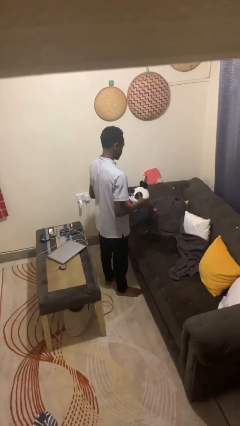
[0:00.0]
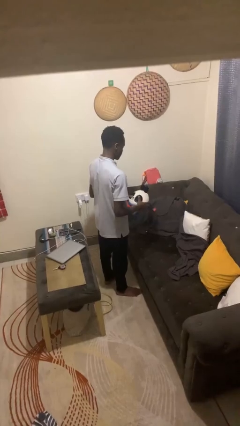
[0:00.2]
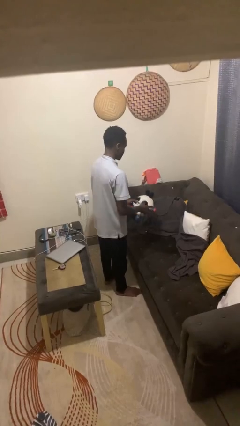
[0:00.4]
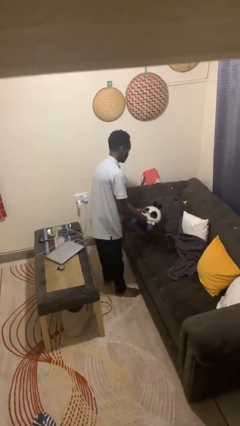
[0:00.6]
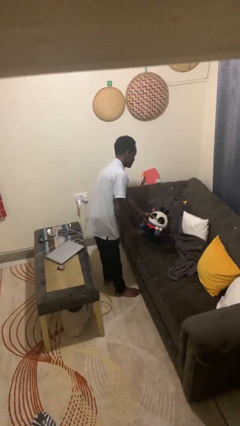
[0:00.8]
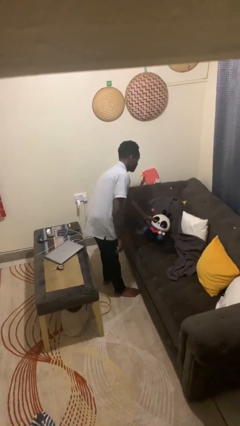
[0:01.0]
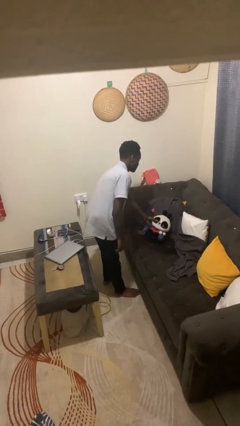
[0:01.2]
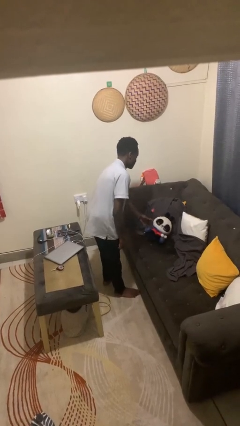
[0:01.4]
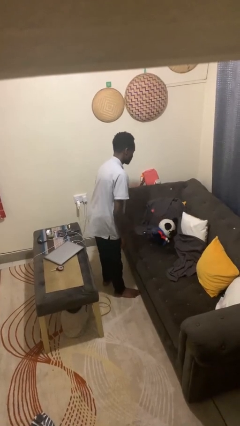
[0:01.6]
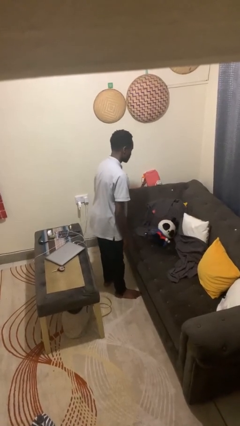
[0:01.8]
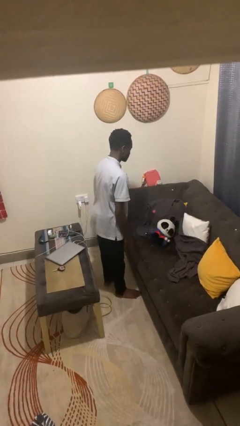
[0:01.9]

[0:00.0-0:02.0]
person puts down object on couch

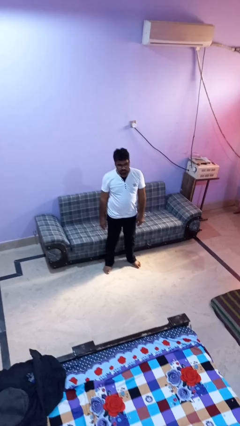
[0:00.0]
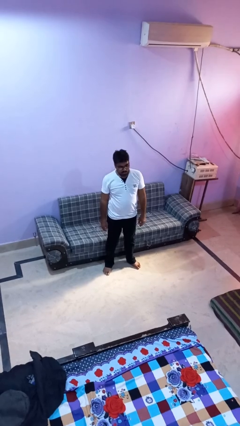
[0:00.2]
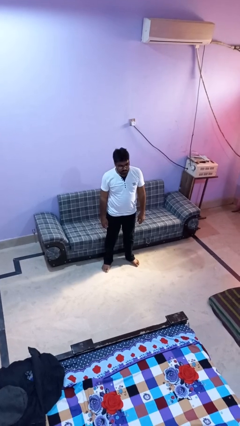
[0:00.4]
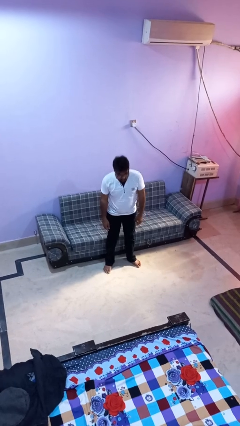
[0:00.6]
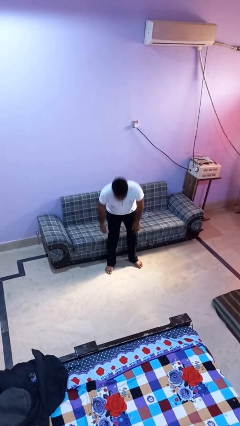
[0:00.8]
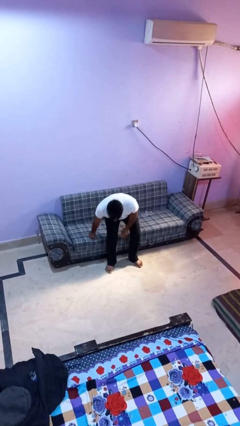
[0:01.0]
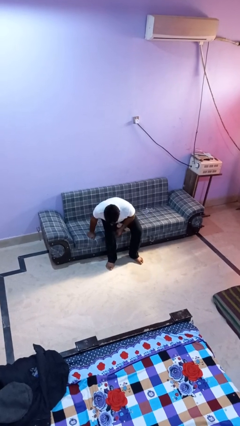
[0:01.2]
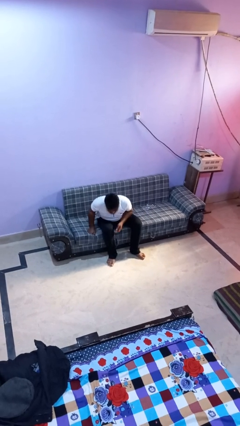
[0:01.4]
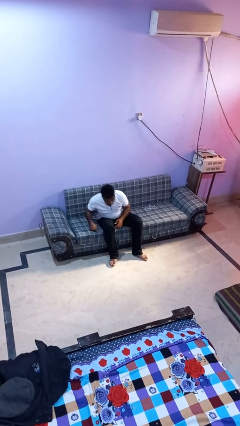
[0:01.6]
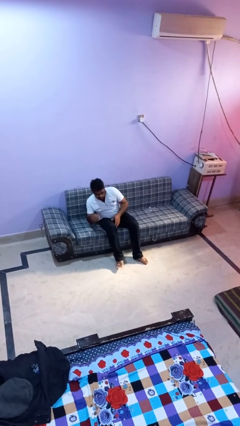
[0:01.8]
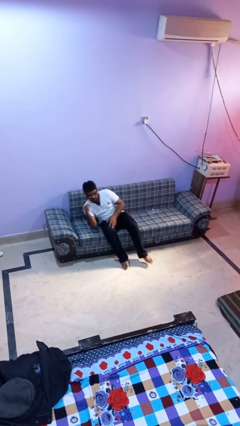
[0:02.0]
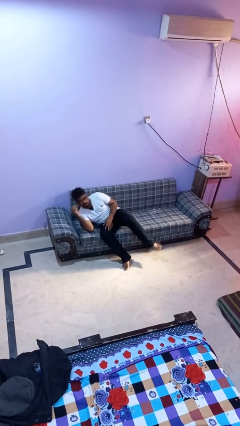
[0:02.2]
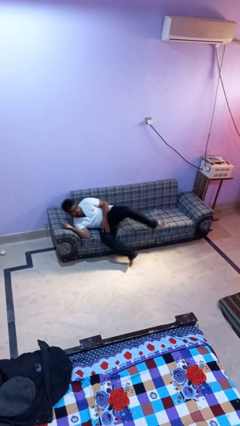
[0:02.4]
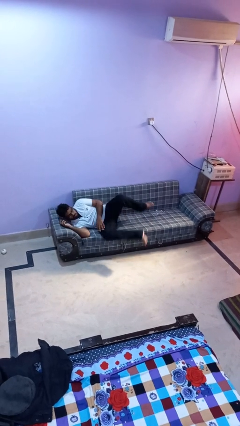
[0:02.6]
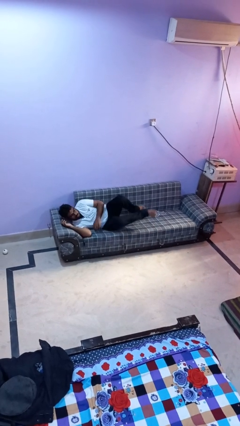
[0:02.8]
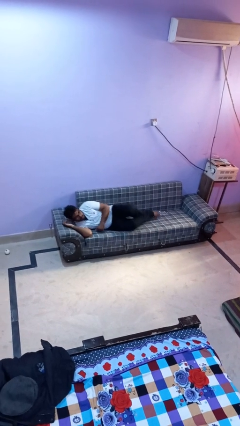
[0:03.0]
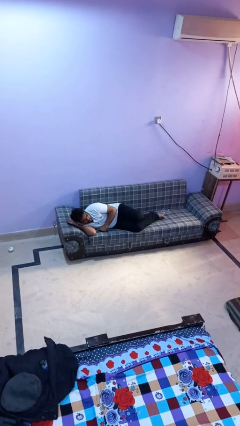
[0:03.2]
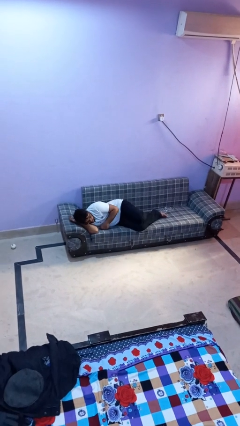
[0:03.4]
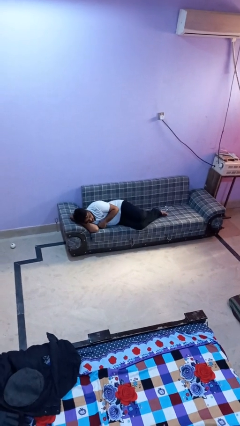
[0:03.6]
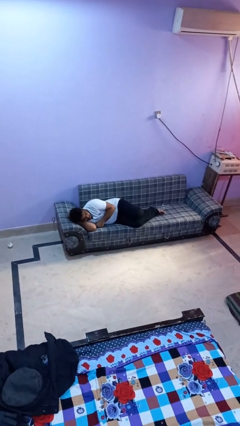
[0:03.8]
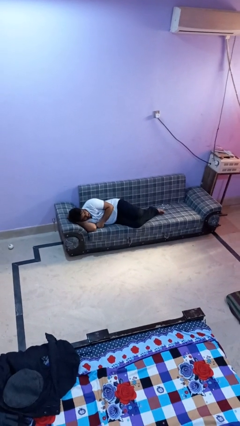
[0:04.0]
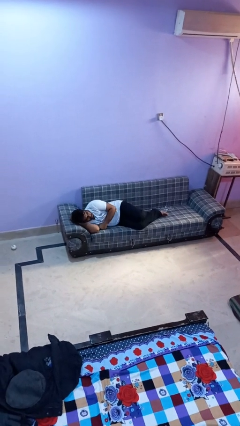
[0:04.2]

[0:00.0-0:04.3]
person lies down on couch

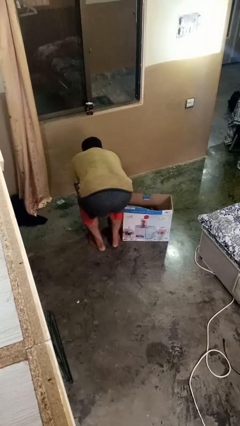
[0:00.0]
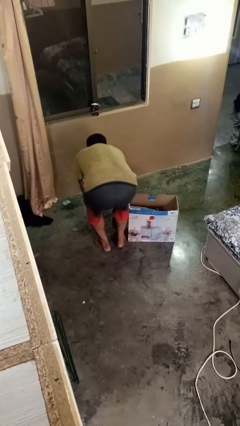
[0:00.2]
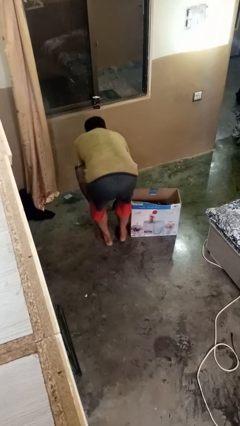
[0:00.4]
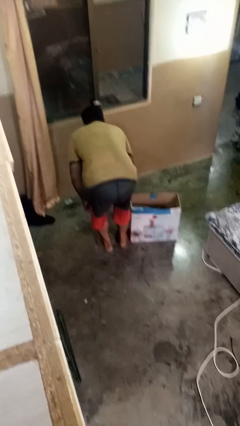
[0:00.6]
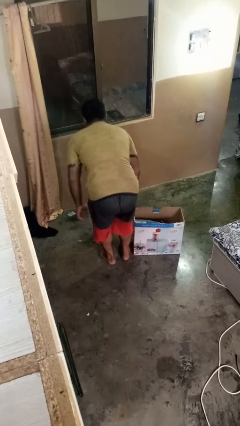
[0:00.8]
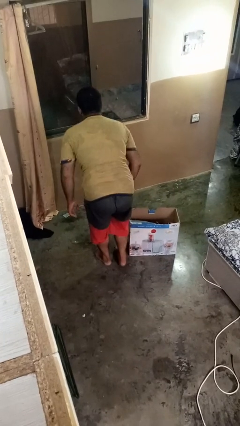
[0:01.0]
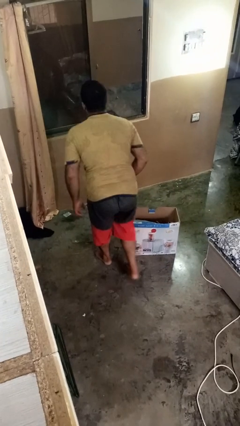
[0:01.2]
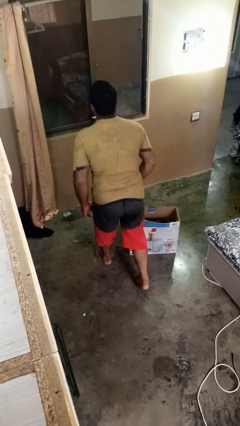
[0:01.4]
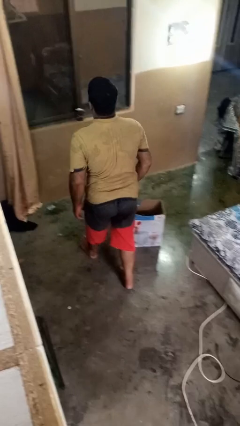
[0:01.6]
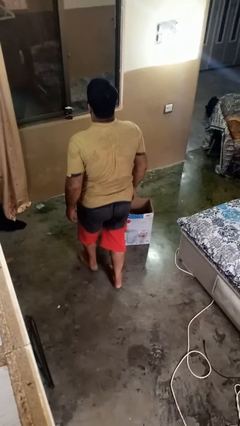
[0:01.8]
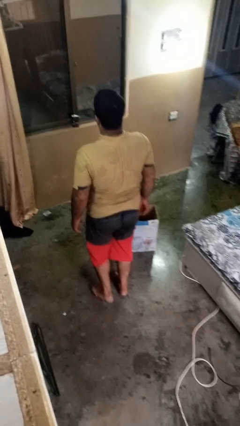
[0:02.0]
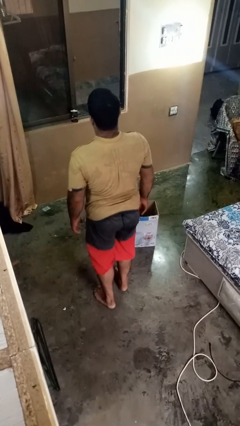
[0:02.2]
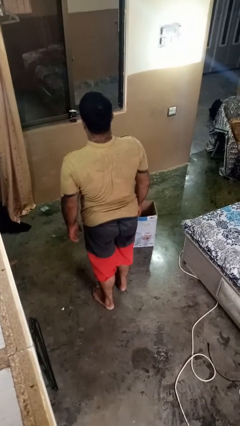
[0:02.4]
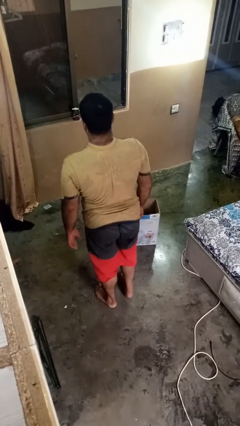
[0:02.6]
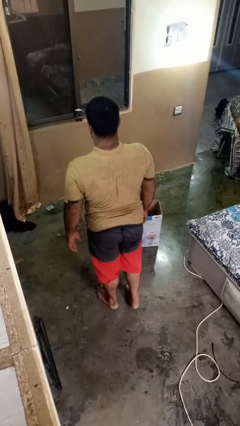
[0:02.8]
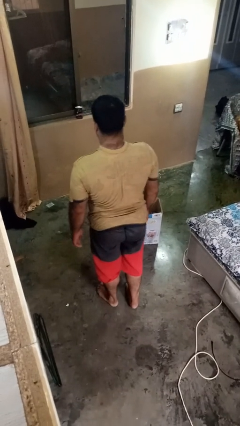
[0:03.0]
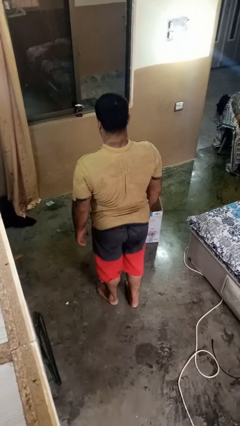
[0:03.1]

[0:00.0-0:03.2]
person stands up from floor

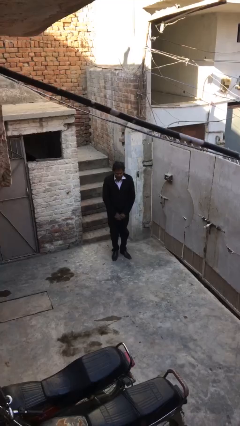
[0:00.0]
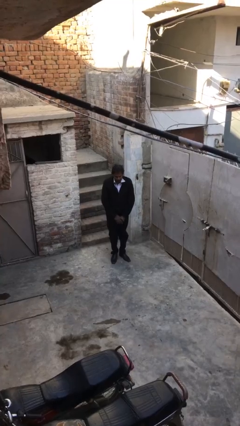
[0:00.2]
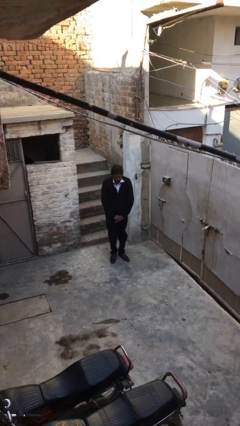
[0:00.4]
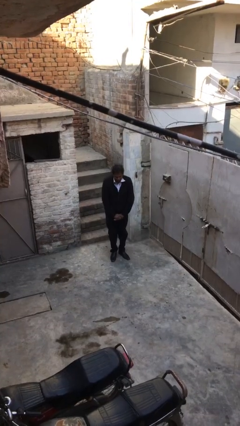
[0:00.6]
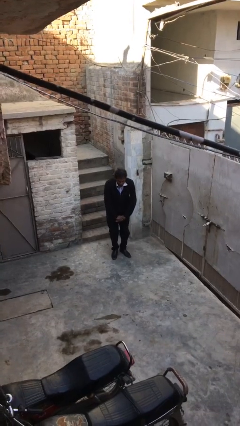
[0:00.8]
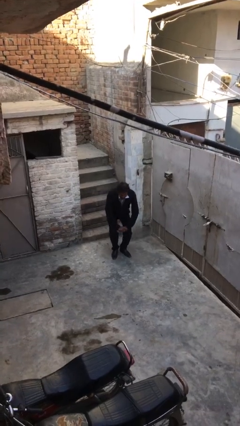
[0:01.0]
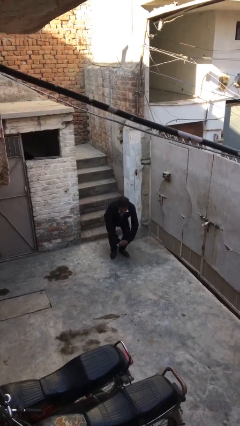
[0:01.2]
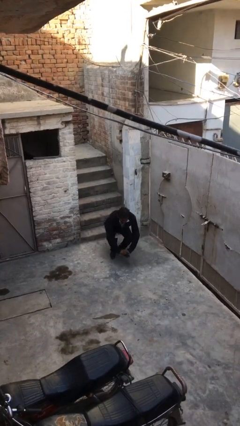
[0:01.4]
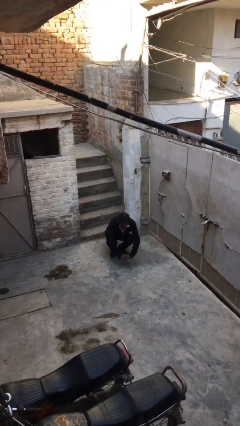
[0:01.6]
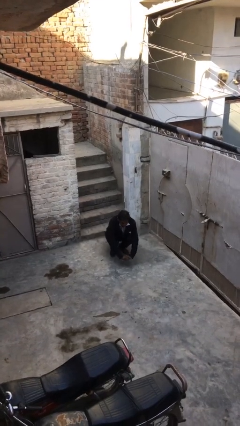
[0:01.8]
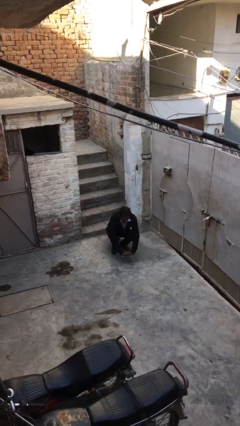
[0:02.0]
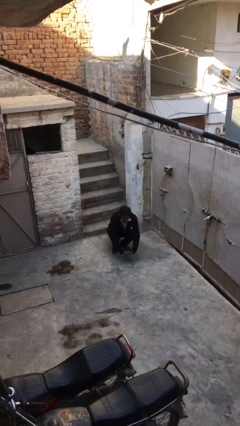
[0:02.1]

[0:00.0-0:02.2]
person sits down

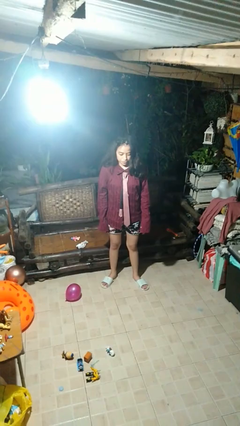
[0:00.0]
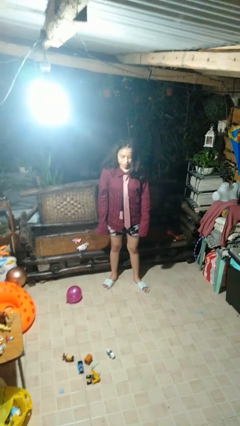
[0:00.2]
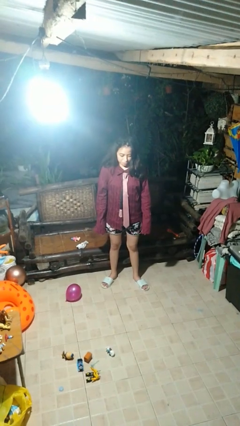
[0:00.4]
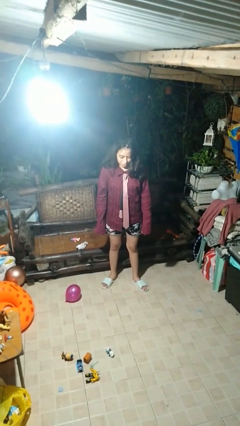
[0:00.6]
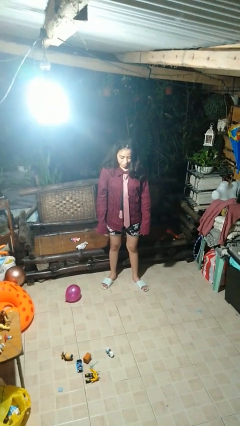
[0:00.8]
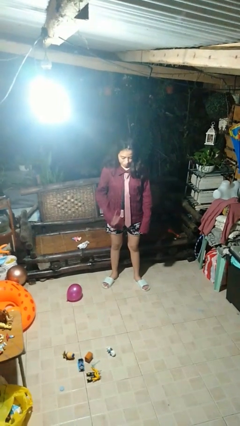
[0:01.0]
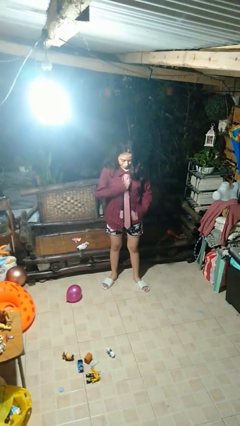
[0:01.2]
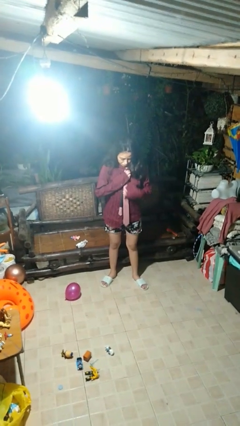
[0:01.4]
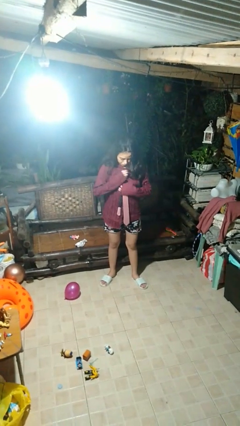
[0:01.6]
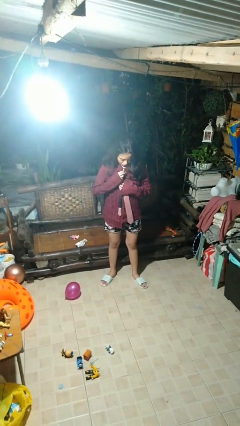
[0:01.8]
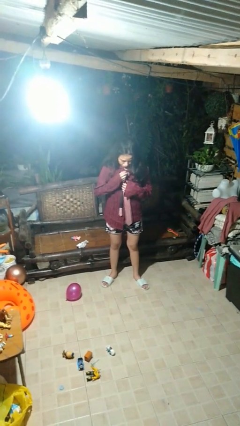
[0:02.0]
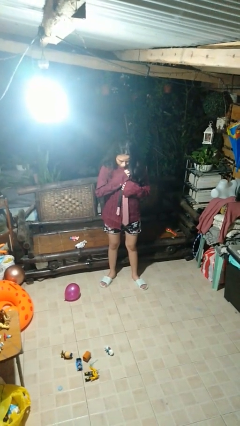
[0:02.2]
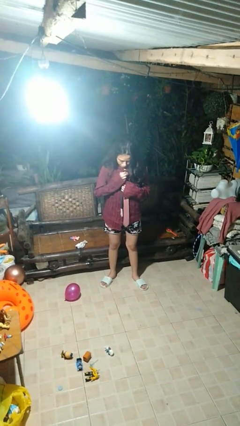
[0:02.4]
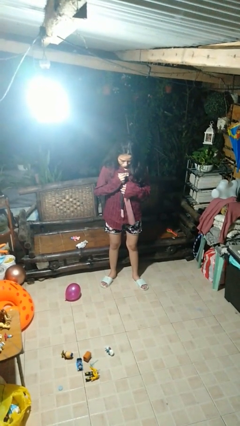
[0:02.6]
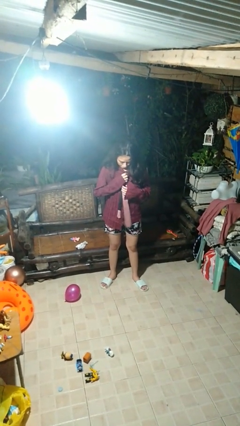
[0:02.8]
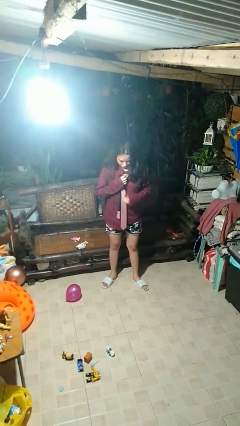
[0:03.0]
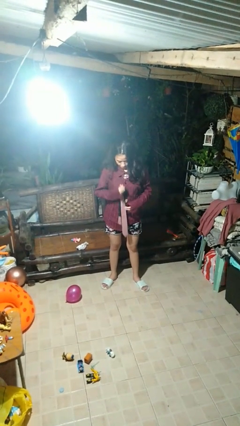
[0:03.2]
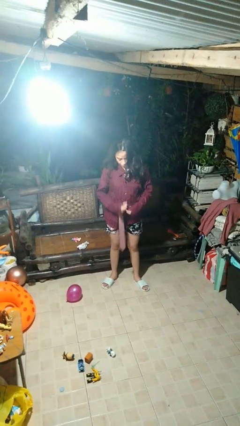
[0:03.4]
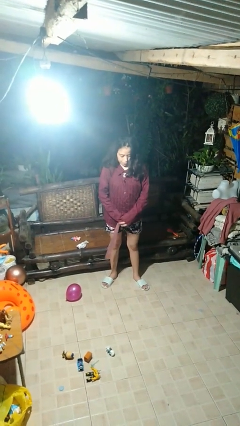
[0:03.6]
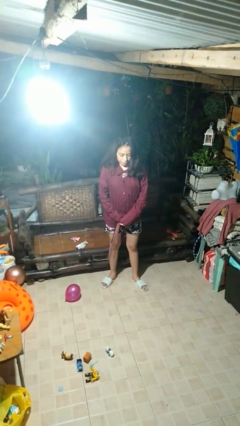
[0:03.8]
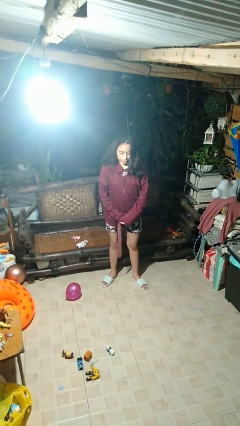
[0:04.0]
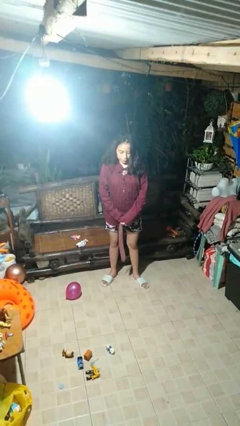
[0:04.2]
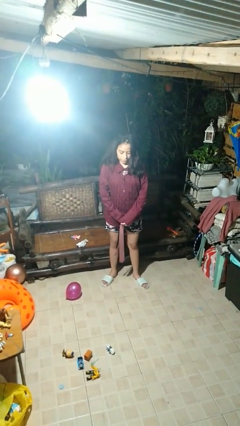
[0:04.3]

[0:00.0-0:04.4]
person takes off necktie

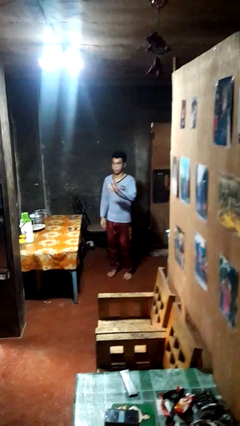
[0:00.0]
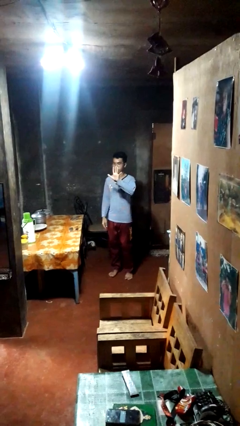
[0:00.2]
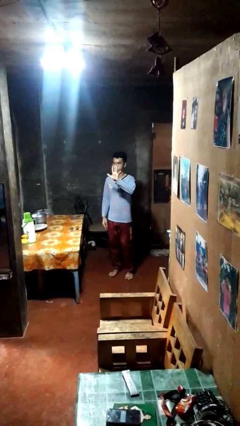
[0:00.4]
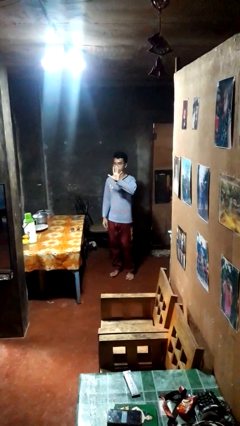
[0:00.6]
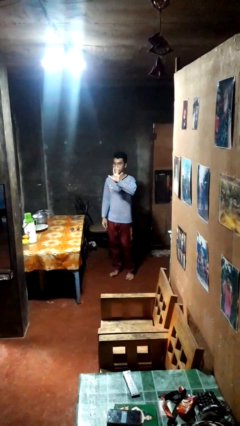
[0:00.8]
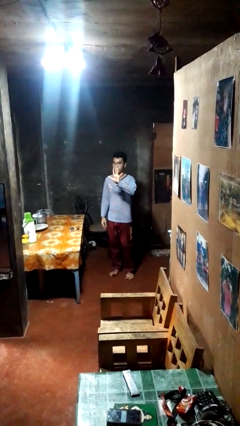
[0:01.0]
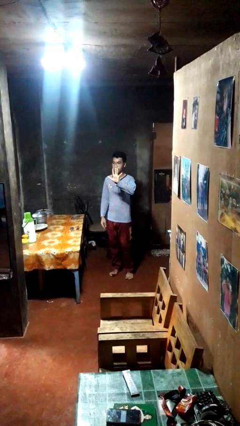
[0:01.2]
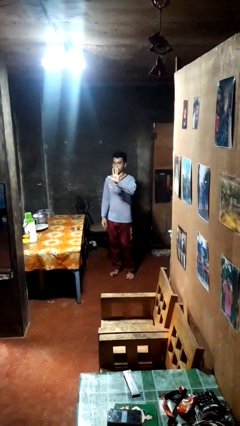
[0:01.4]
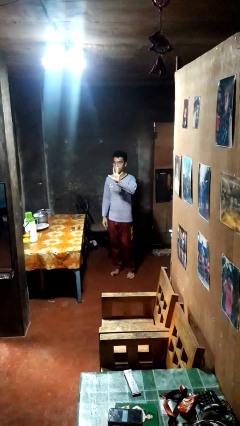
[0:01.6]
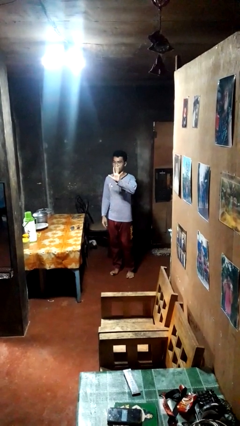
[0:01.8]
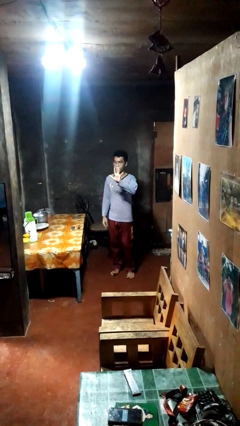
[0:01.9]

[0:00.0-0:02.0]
person gestures number five
